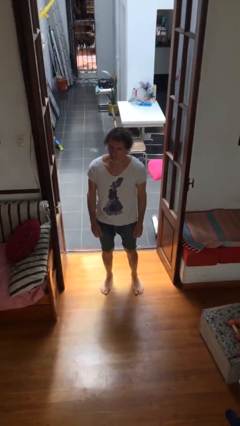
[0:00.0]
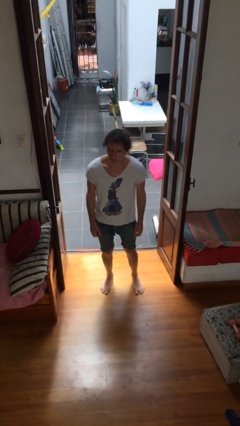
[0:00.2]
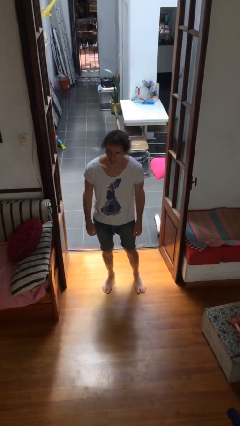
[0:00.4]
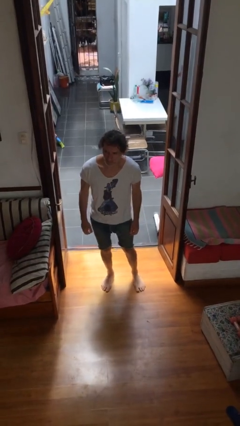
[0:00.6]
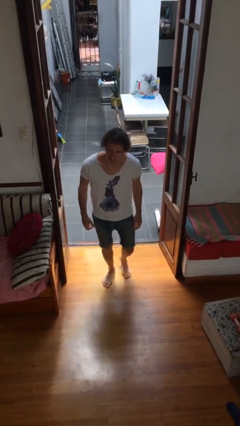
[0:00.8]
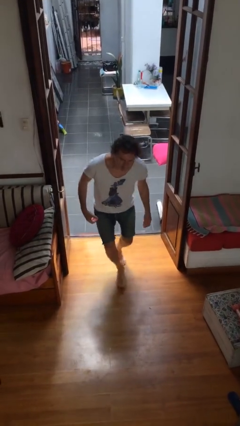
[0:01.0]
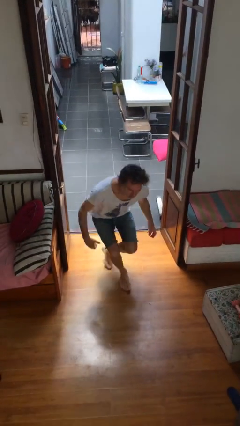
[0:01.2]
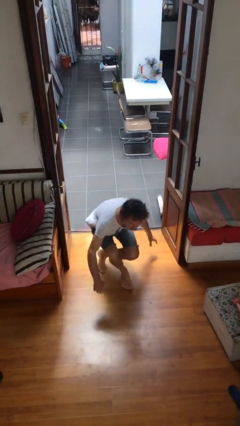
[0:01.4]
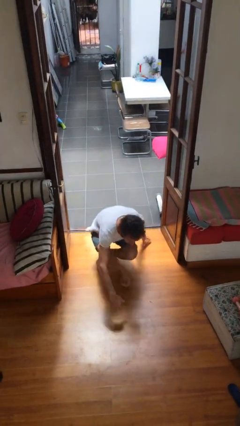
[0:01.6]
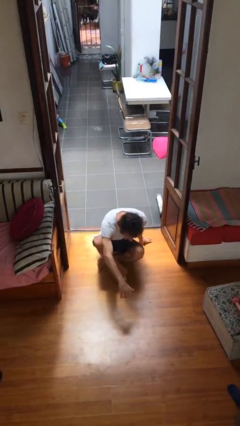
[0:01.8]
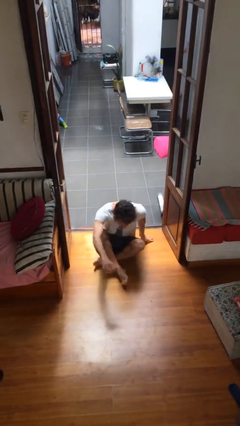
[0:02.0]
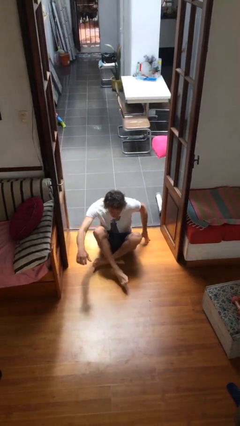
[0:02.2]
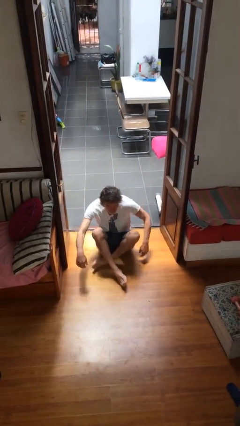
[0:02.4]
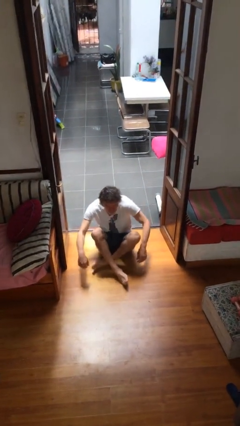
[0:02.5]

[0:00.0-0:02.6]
person sits down

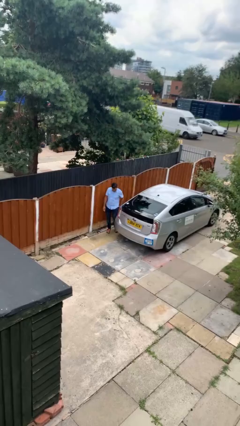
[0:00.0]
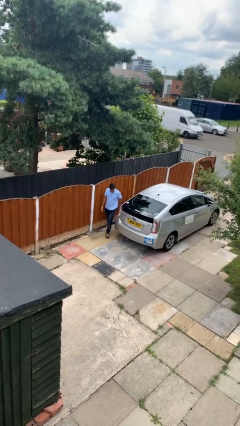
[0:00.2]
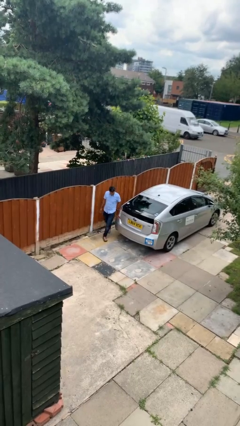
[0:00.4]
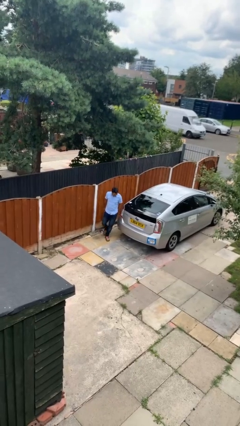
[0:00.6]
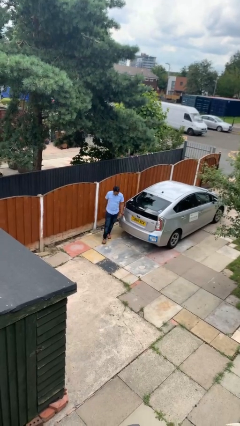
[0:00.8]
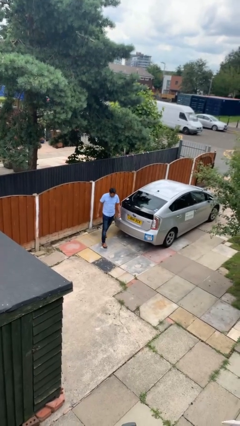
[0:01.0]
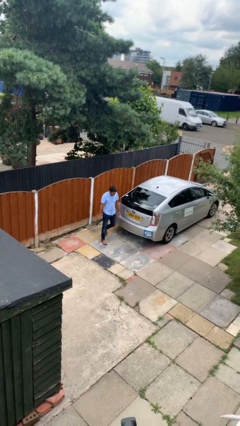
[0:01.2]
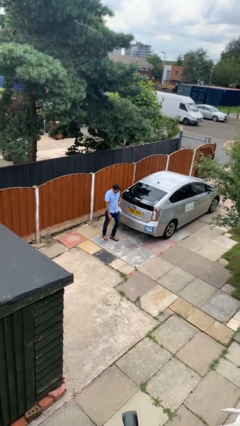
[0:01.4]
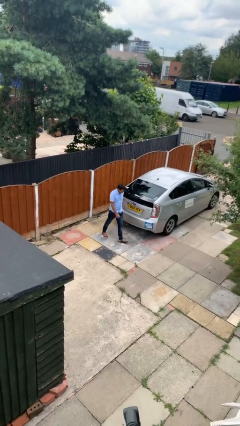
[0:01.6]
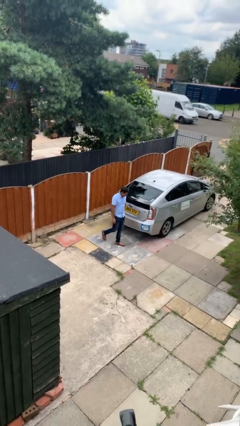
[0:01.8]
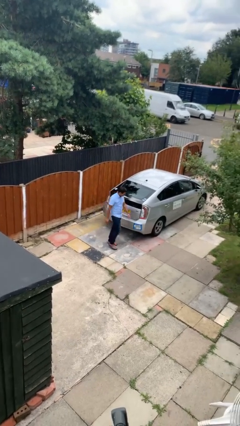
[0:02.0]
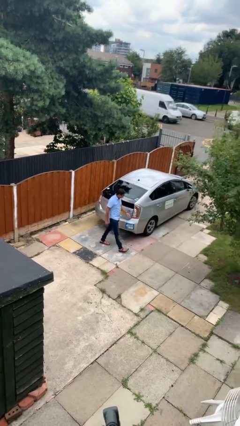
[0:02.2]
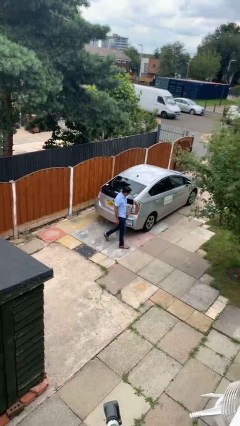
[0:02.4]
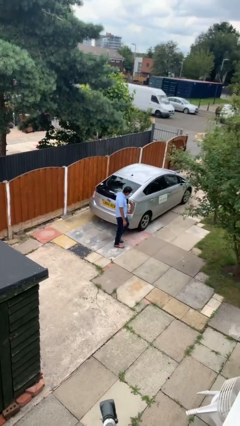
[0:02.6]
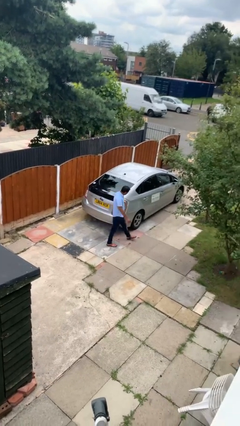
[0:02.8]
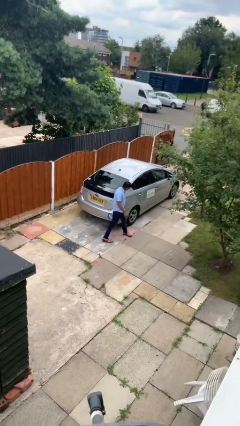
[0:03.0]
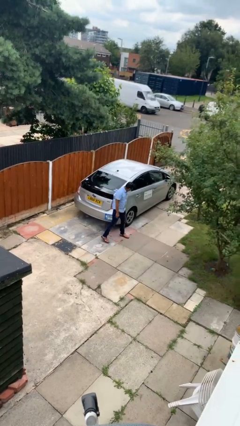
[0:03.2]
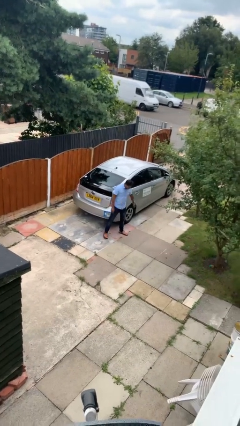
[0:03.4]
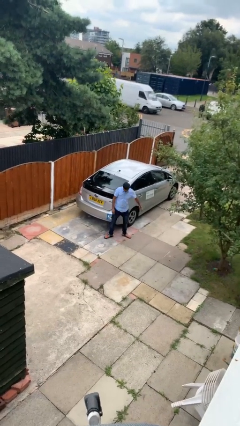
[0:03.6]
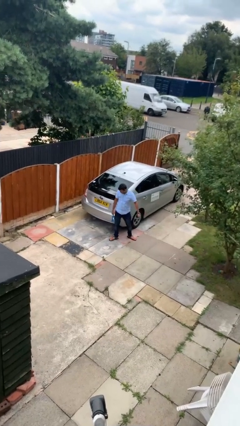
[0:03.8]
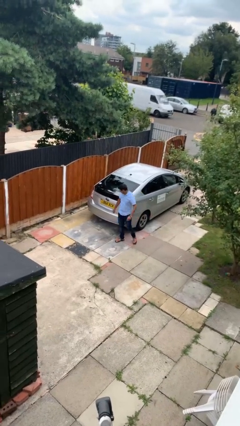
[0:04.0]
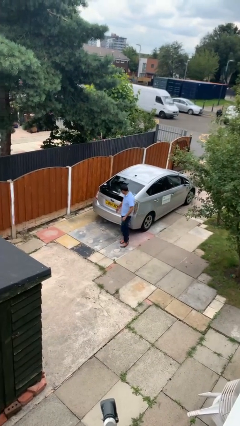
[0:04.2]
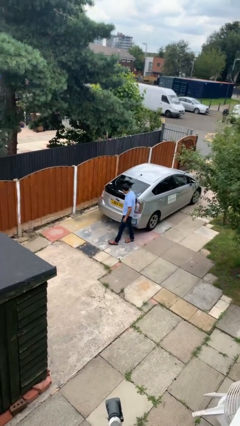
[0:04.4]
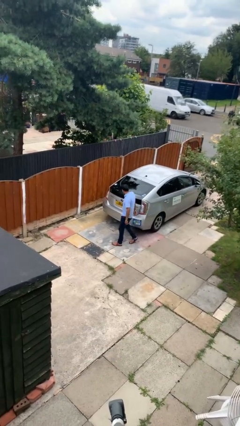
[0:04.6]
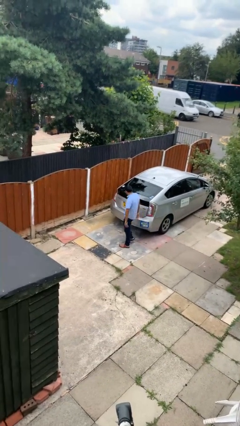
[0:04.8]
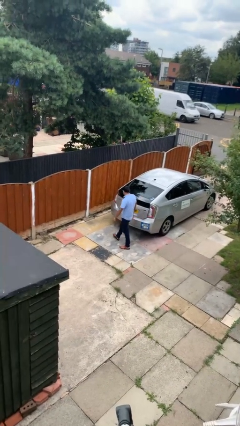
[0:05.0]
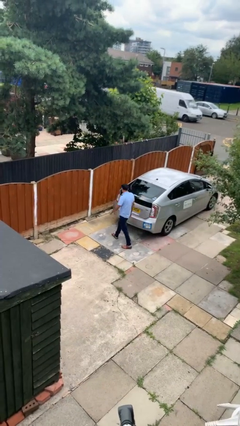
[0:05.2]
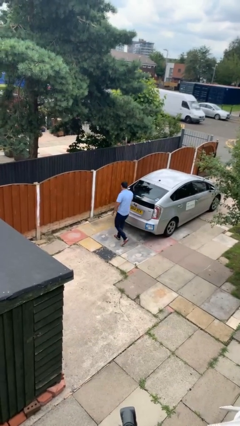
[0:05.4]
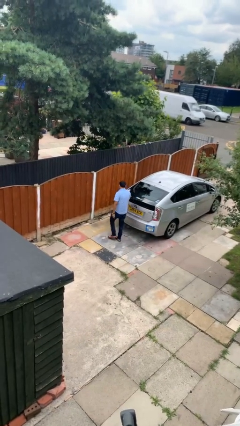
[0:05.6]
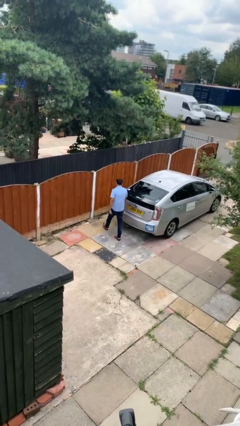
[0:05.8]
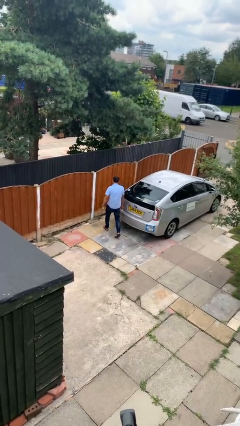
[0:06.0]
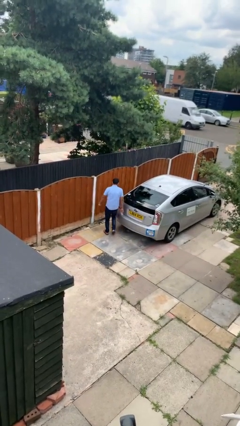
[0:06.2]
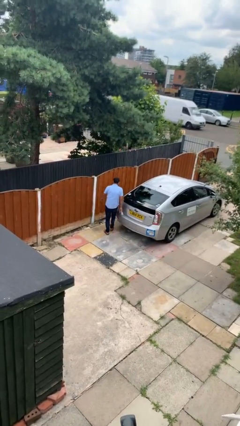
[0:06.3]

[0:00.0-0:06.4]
person walks around car

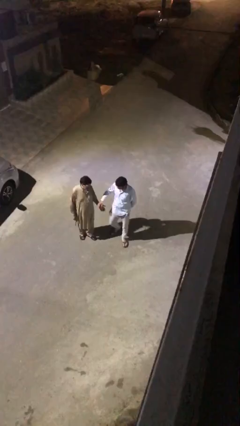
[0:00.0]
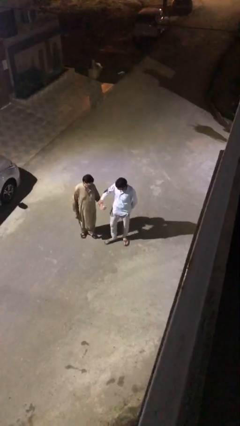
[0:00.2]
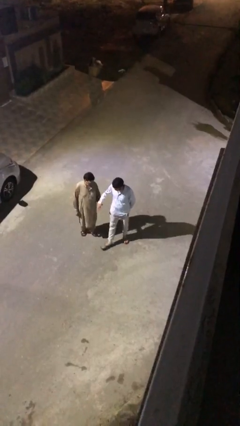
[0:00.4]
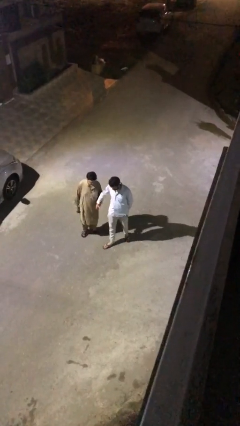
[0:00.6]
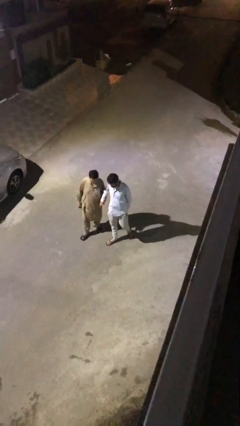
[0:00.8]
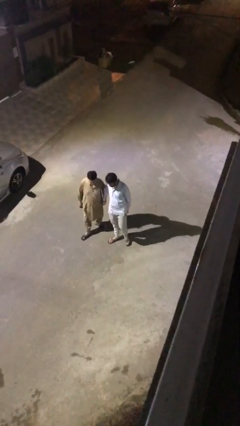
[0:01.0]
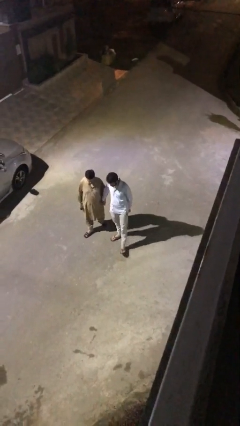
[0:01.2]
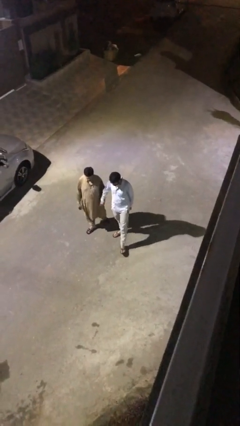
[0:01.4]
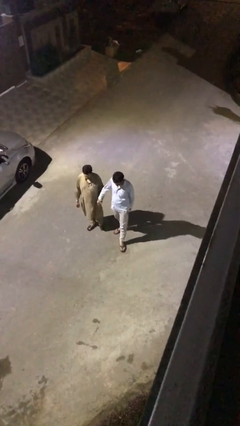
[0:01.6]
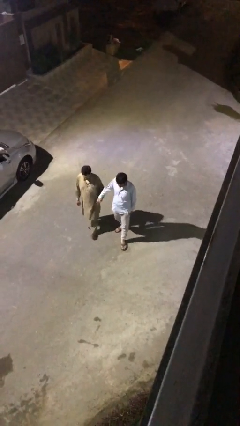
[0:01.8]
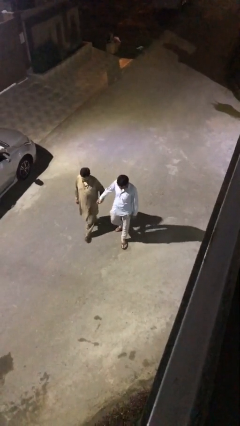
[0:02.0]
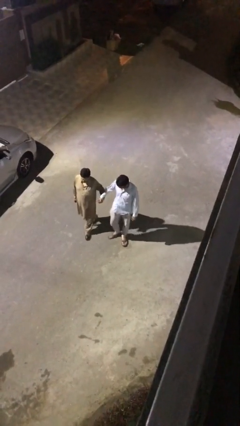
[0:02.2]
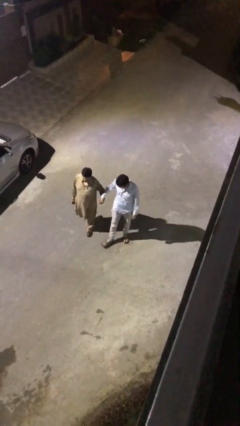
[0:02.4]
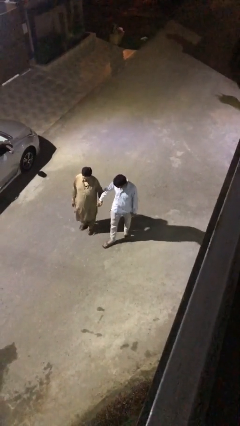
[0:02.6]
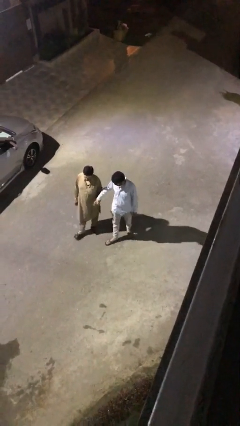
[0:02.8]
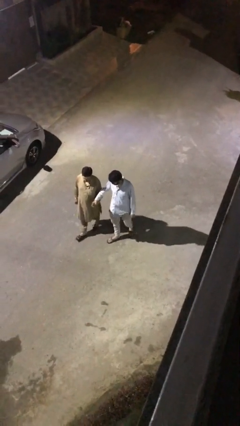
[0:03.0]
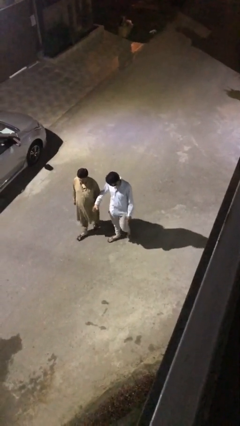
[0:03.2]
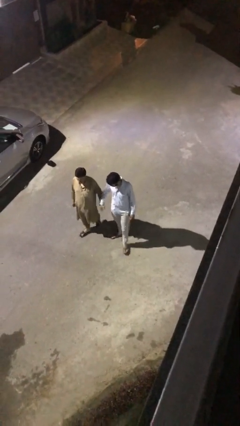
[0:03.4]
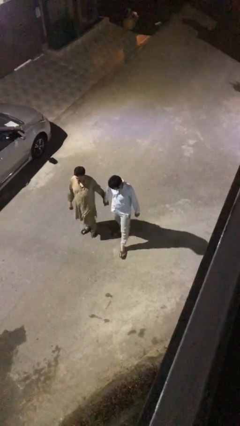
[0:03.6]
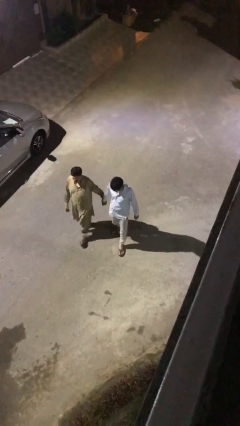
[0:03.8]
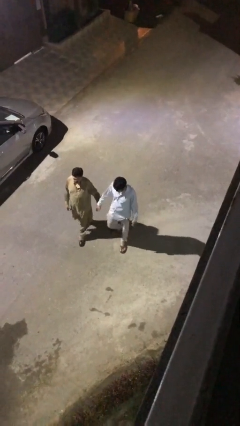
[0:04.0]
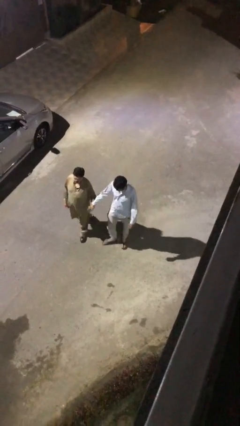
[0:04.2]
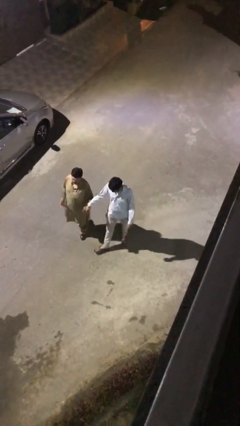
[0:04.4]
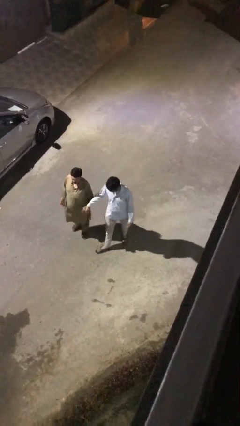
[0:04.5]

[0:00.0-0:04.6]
person holds hand

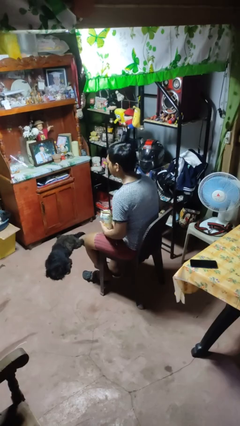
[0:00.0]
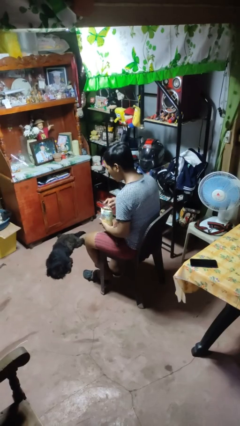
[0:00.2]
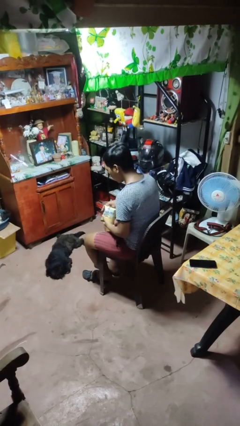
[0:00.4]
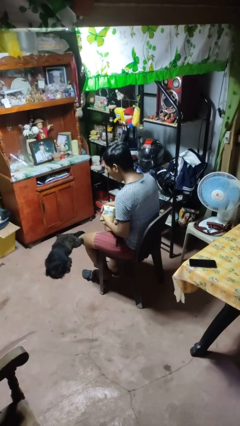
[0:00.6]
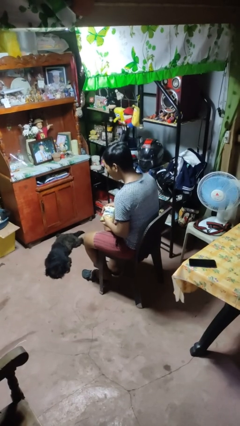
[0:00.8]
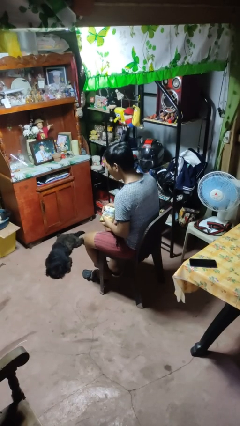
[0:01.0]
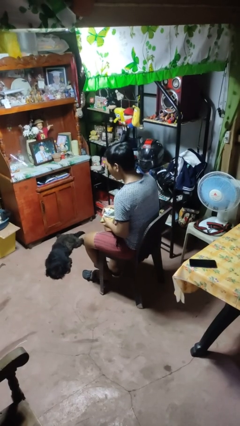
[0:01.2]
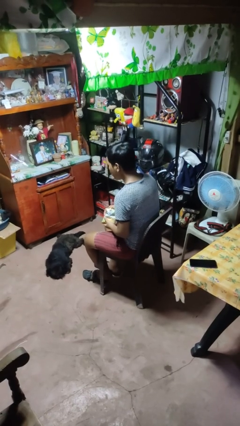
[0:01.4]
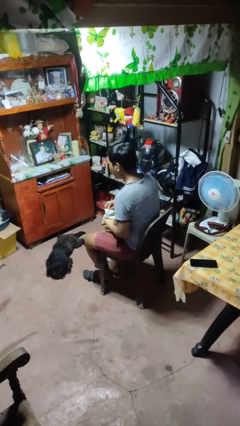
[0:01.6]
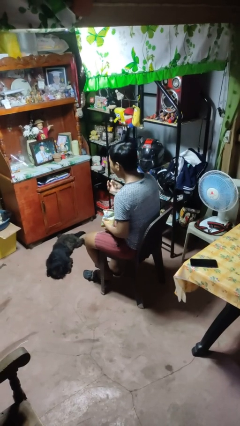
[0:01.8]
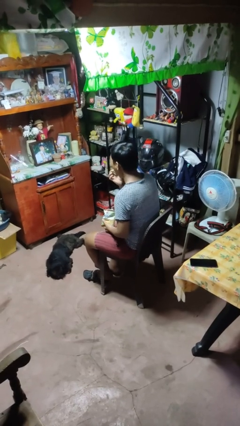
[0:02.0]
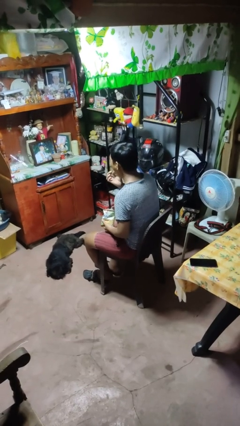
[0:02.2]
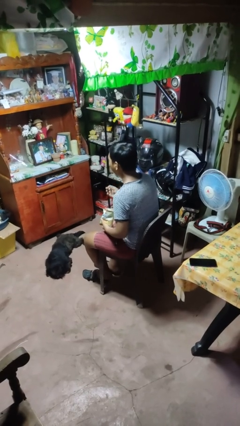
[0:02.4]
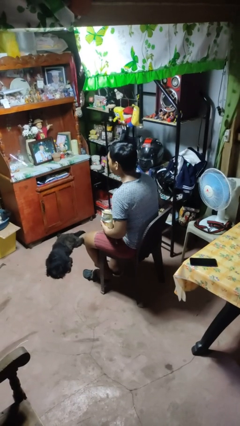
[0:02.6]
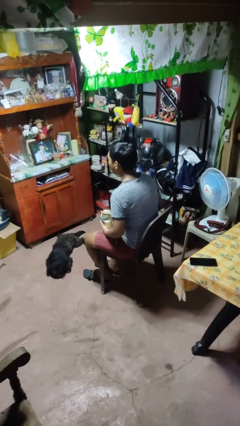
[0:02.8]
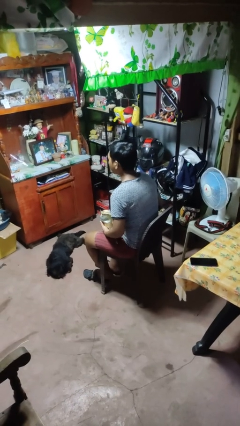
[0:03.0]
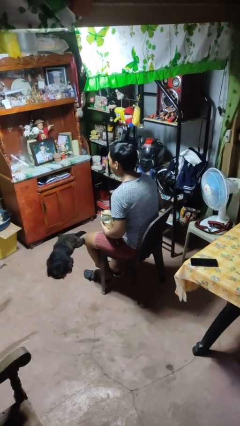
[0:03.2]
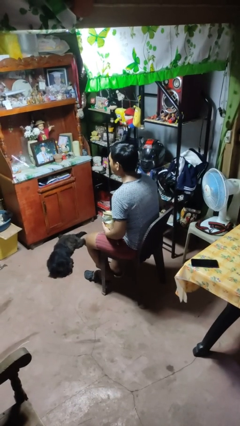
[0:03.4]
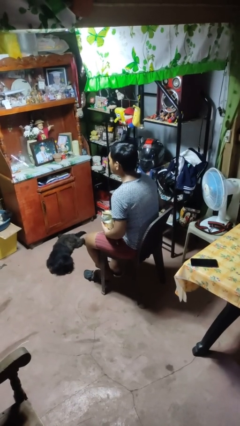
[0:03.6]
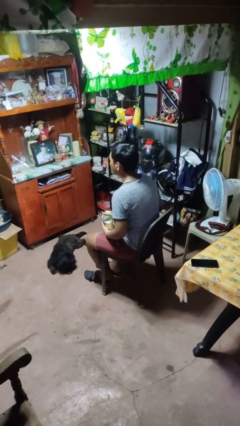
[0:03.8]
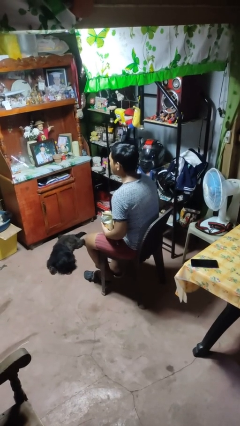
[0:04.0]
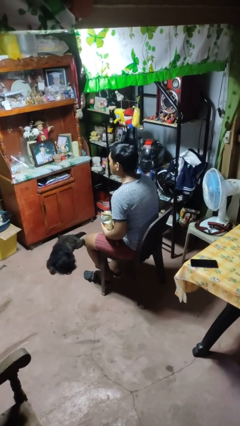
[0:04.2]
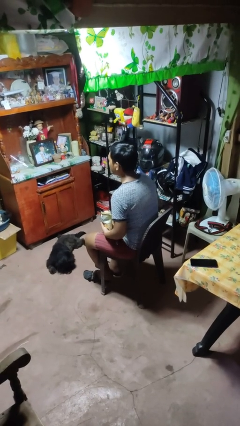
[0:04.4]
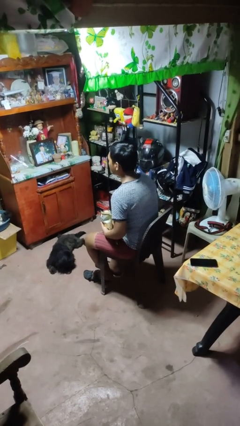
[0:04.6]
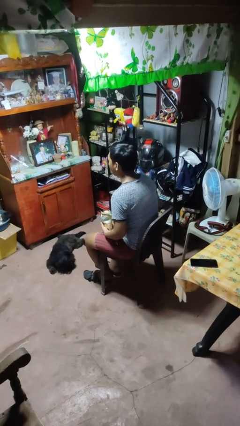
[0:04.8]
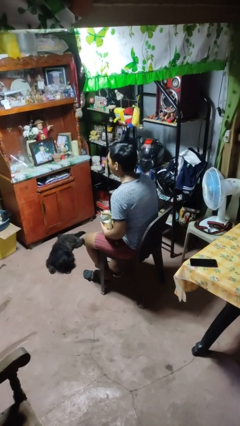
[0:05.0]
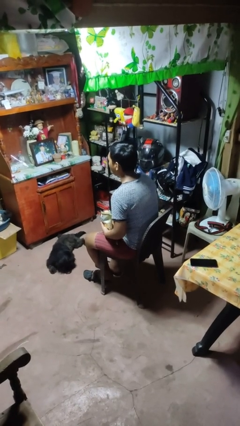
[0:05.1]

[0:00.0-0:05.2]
person eats snack from bag
